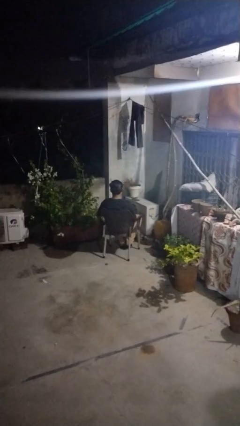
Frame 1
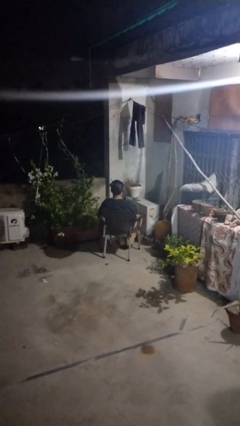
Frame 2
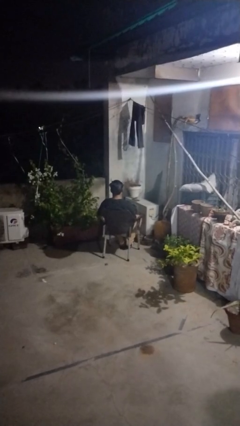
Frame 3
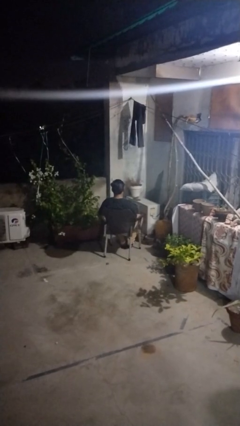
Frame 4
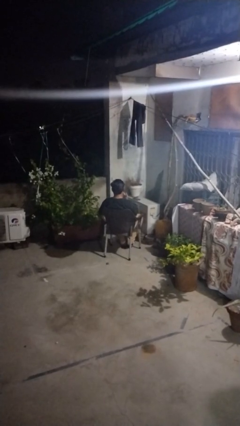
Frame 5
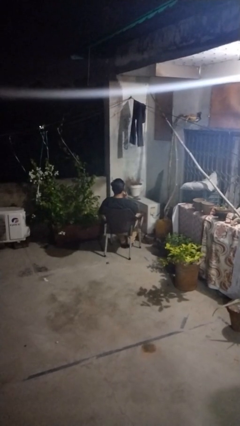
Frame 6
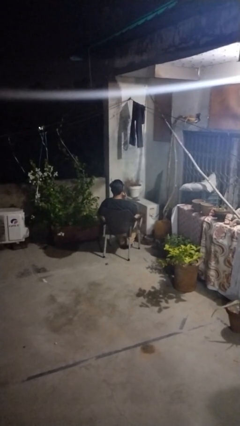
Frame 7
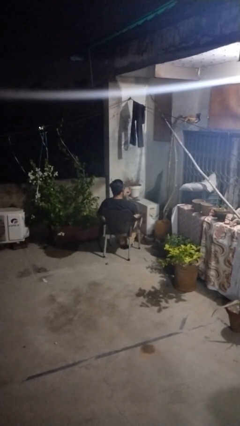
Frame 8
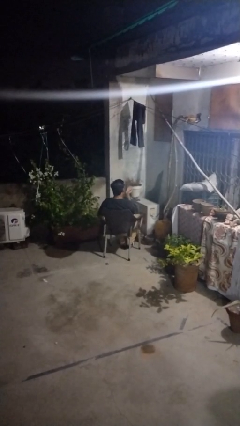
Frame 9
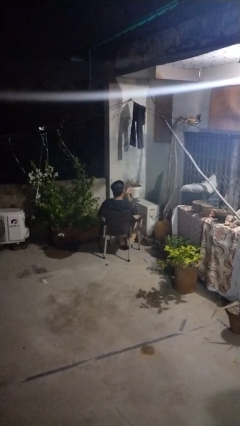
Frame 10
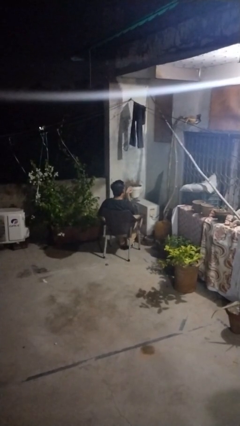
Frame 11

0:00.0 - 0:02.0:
person gestures blow kiss

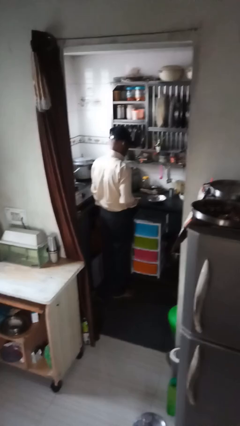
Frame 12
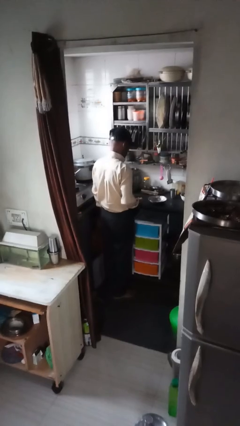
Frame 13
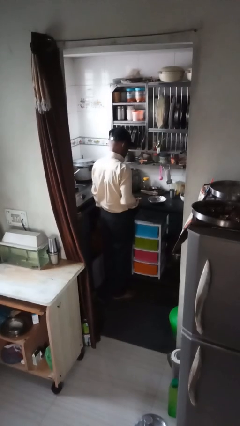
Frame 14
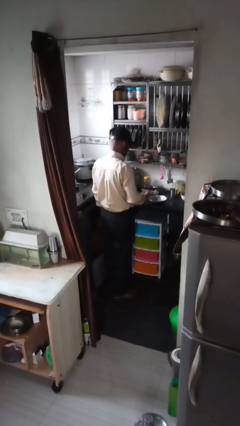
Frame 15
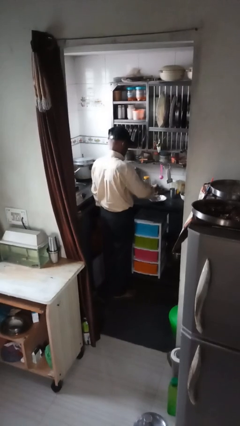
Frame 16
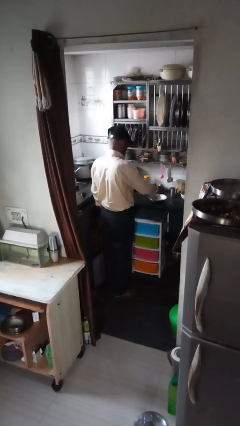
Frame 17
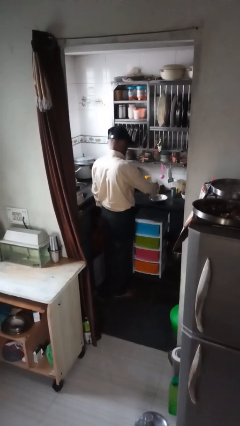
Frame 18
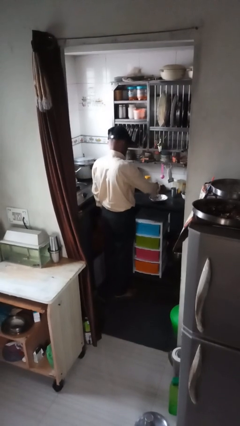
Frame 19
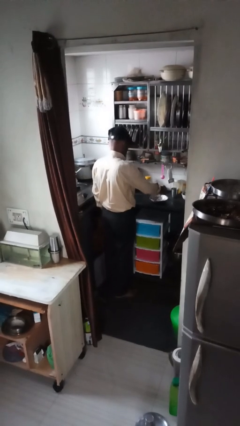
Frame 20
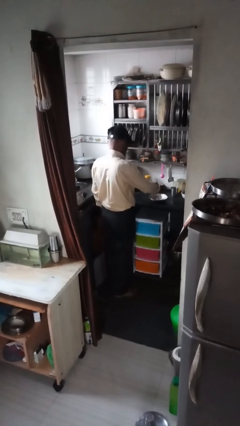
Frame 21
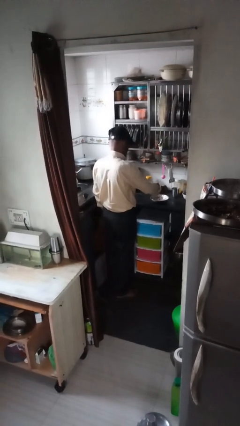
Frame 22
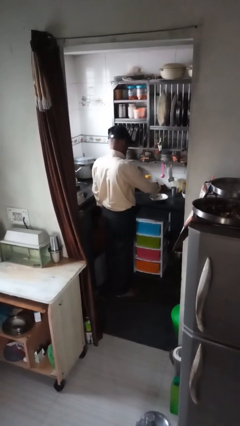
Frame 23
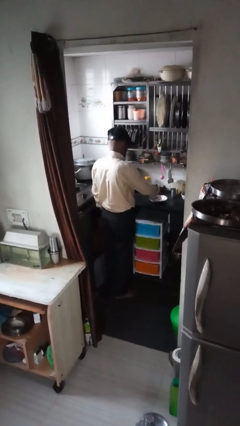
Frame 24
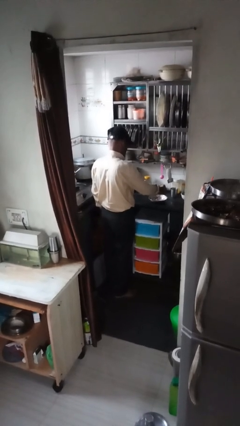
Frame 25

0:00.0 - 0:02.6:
person pours into bowl

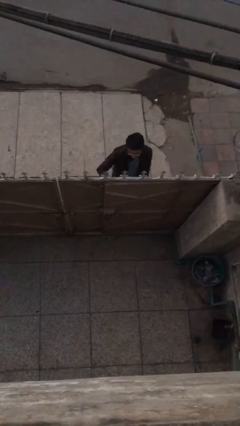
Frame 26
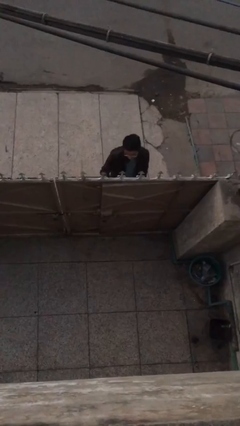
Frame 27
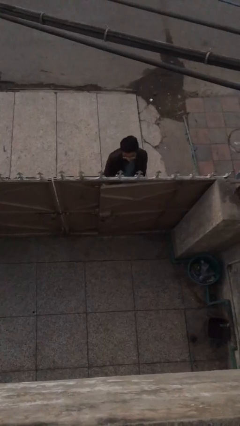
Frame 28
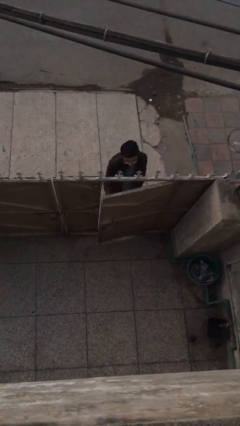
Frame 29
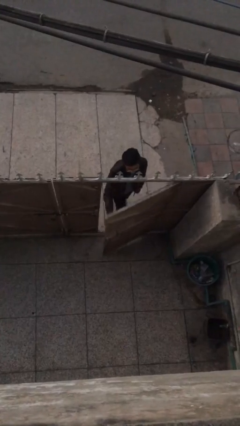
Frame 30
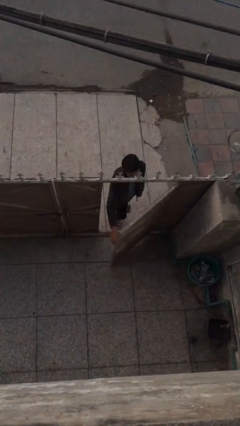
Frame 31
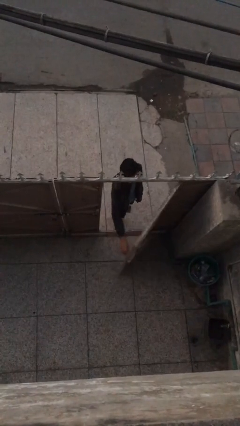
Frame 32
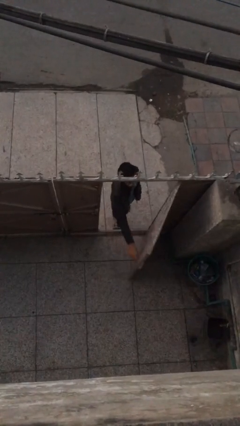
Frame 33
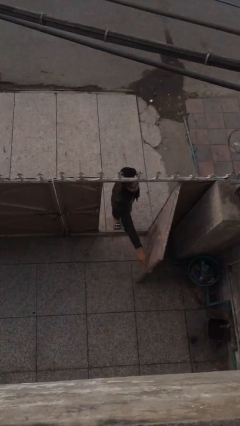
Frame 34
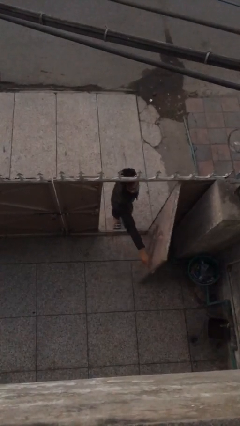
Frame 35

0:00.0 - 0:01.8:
person opens facility door

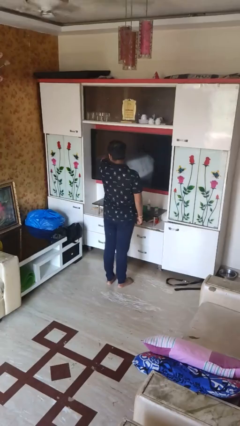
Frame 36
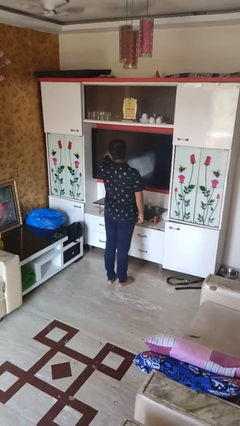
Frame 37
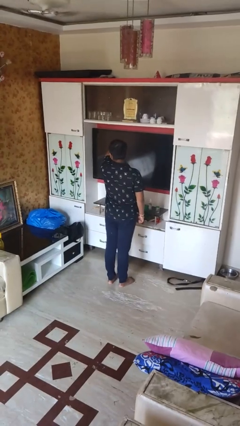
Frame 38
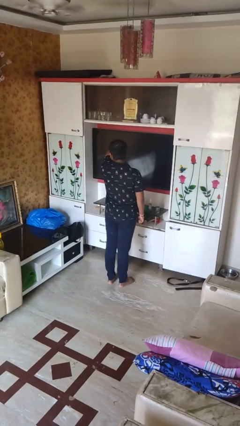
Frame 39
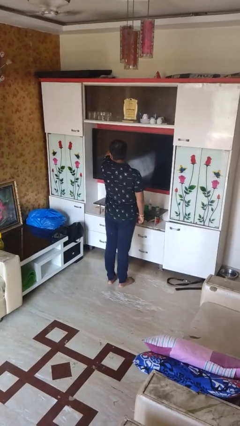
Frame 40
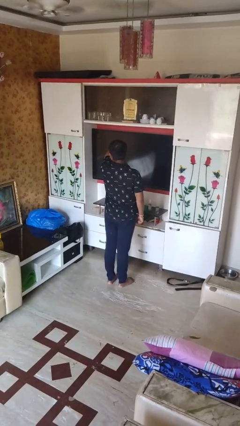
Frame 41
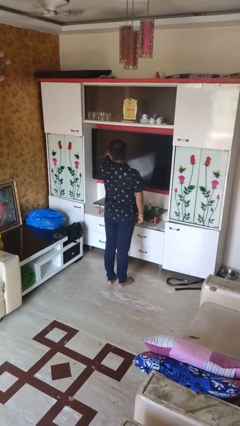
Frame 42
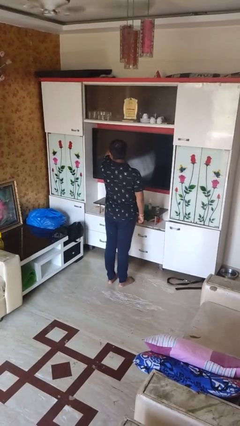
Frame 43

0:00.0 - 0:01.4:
person sneezes into arm

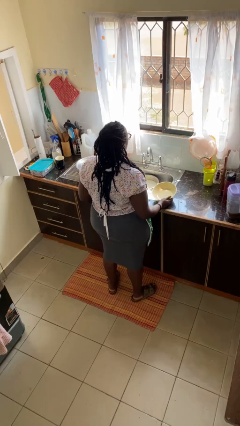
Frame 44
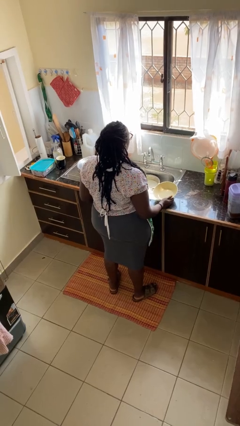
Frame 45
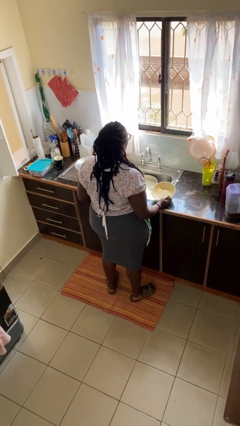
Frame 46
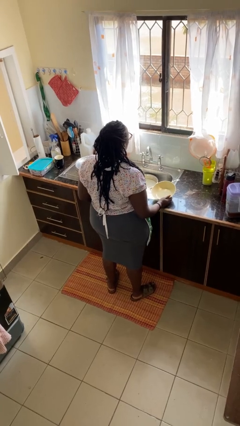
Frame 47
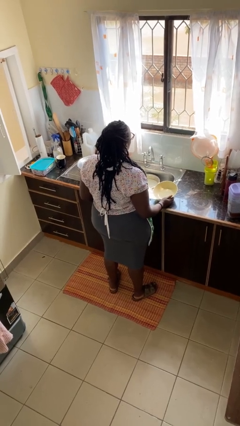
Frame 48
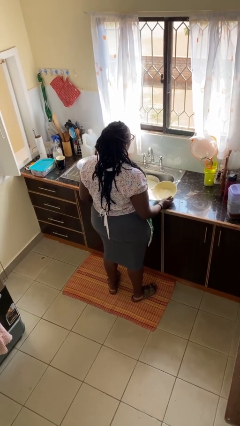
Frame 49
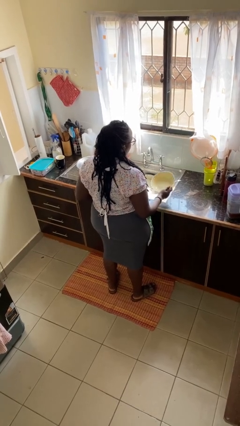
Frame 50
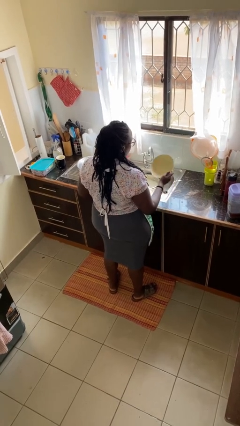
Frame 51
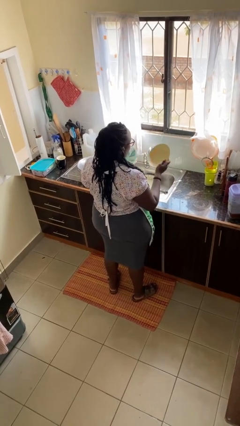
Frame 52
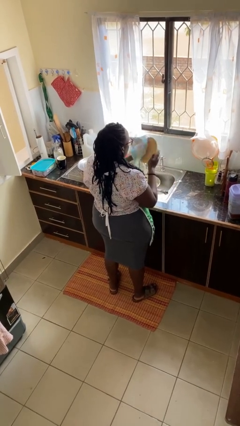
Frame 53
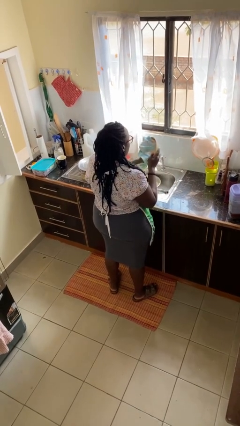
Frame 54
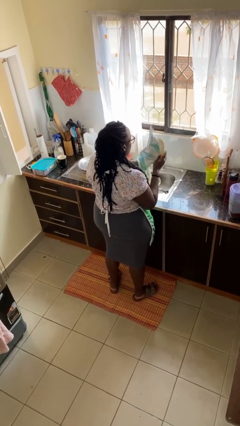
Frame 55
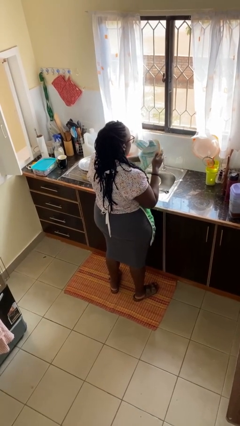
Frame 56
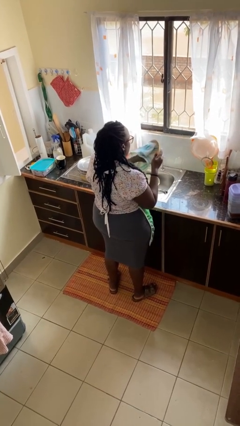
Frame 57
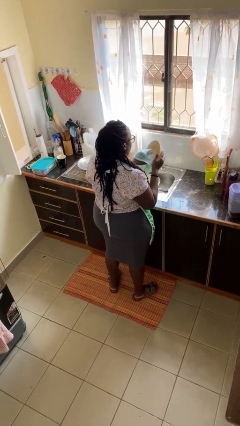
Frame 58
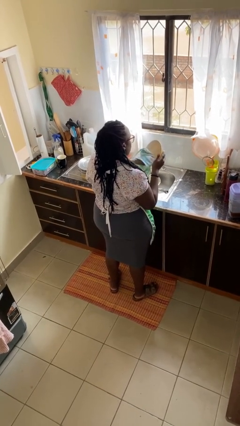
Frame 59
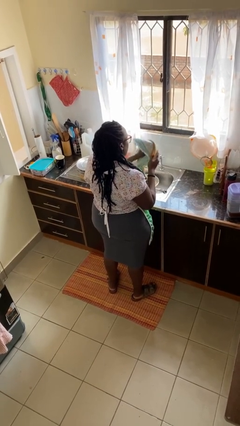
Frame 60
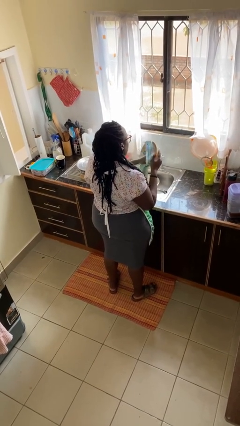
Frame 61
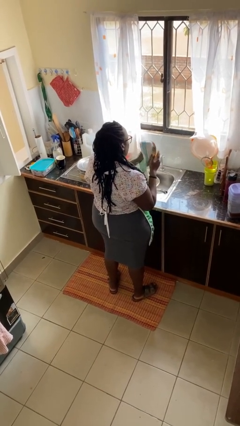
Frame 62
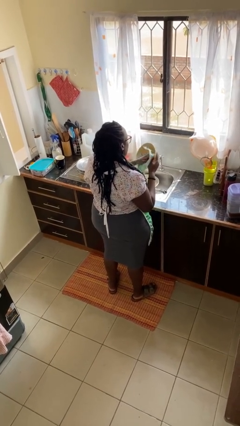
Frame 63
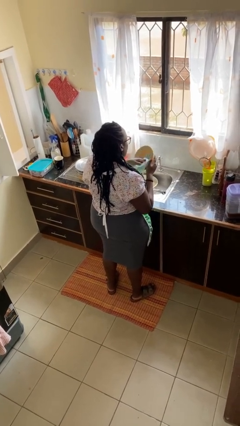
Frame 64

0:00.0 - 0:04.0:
person dries dish

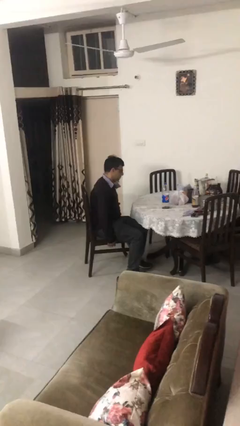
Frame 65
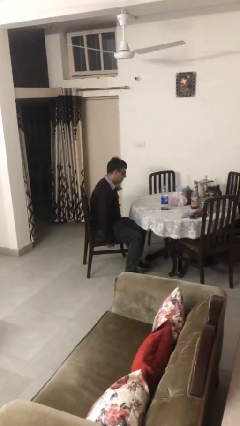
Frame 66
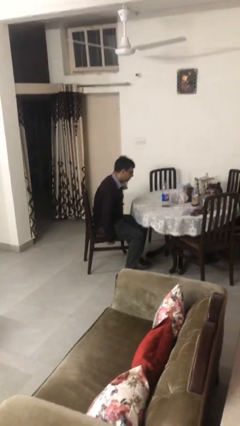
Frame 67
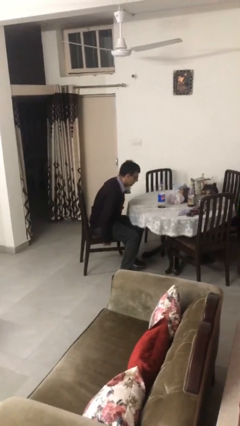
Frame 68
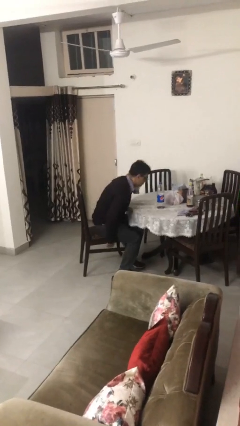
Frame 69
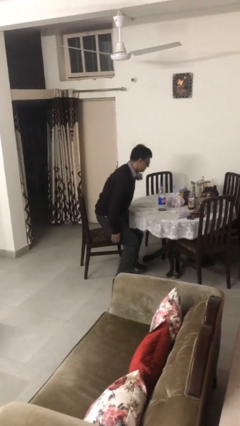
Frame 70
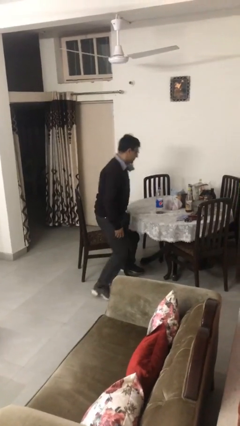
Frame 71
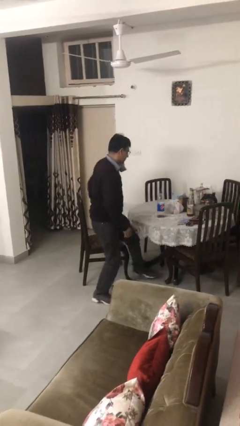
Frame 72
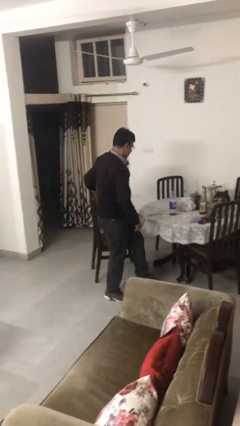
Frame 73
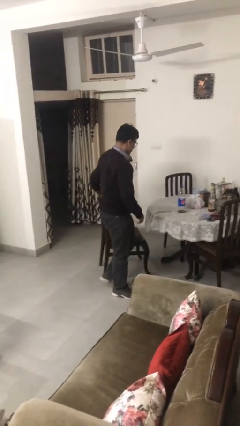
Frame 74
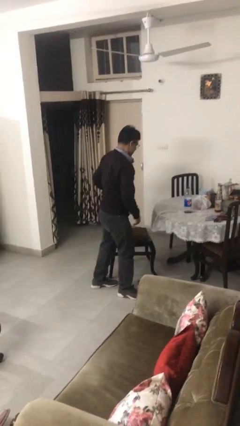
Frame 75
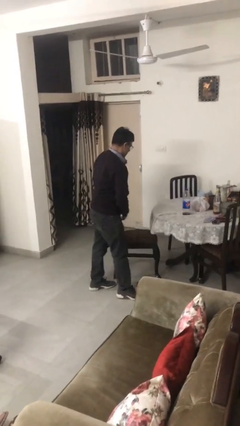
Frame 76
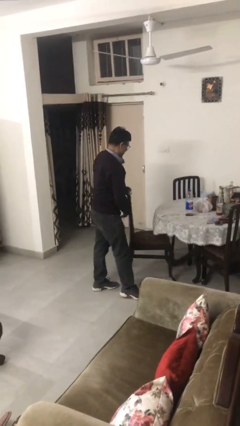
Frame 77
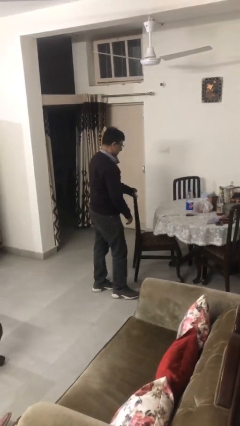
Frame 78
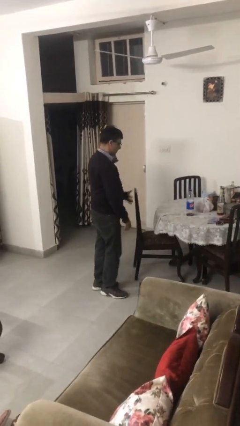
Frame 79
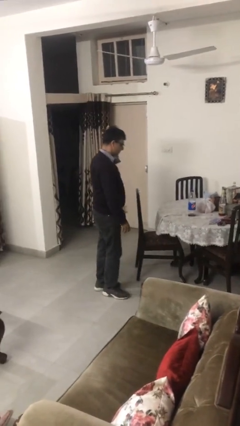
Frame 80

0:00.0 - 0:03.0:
person stands up

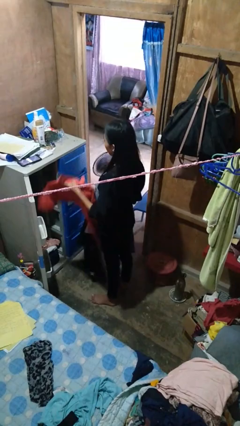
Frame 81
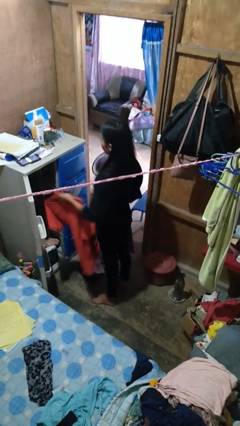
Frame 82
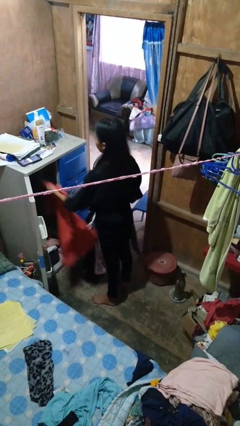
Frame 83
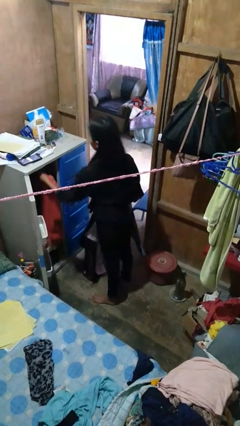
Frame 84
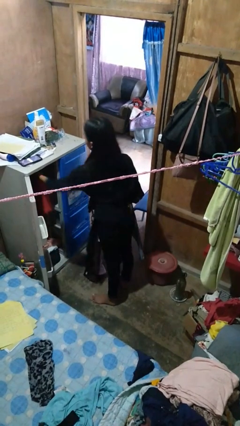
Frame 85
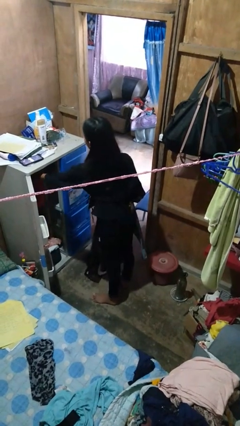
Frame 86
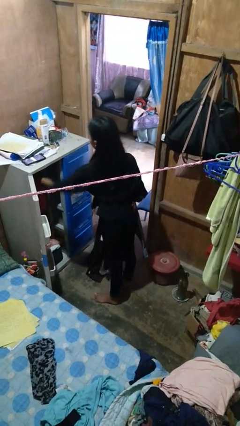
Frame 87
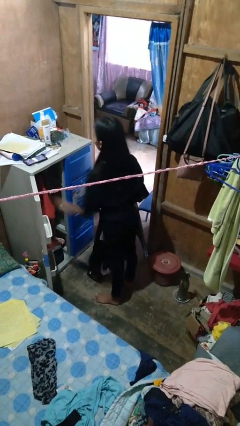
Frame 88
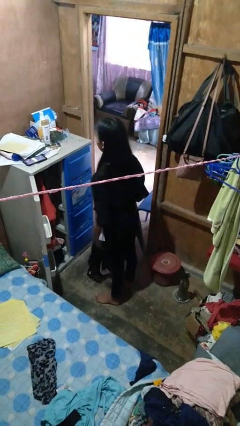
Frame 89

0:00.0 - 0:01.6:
person puts clothes into closet

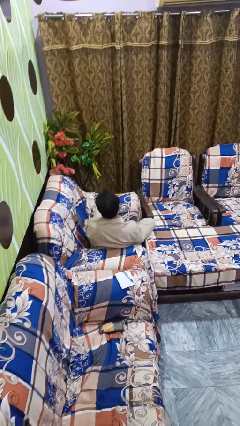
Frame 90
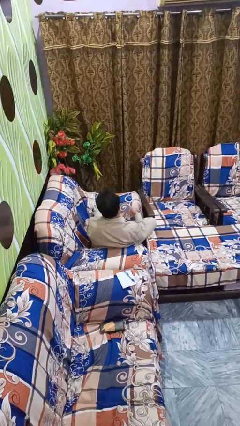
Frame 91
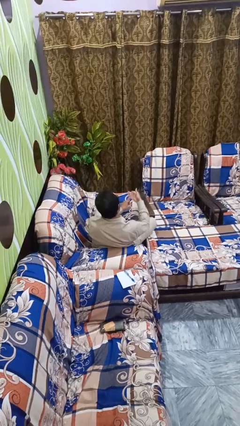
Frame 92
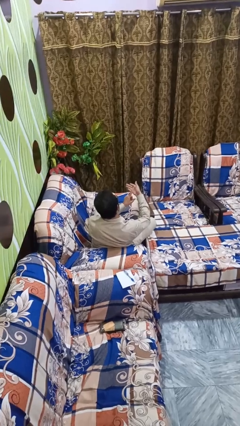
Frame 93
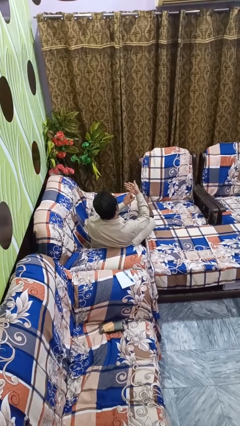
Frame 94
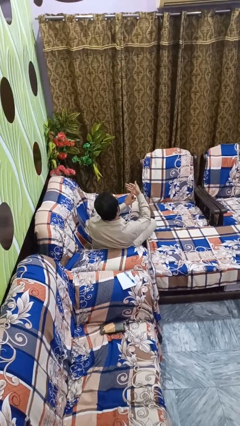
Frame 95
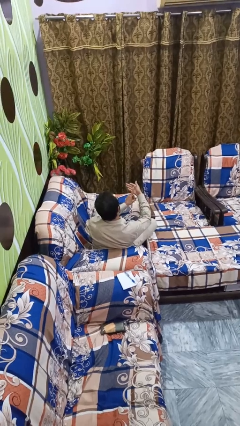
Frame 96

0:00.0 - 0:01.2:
person gestures number one
